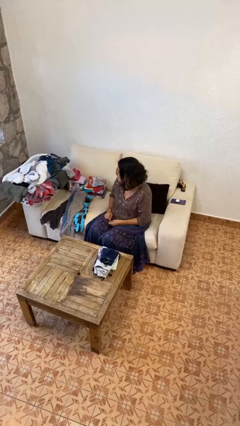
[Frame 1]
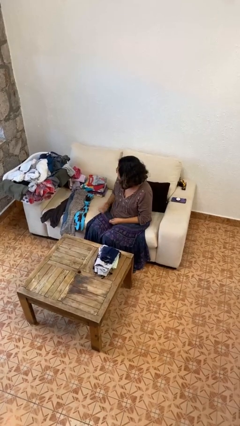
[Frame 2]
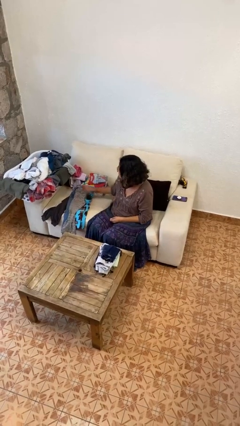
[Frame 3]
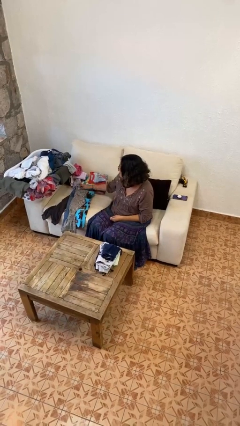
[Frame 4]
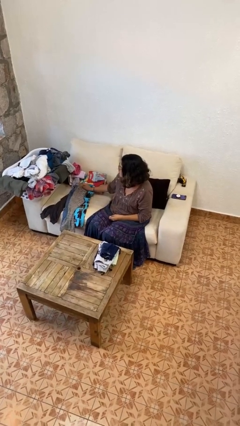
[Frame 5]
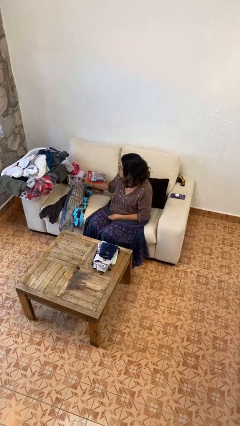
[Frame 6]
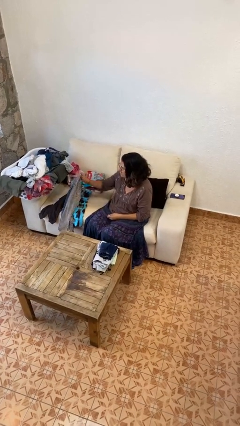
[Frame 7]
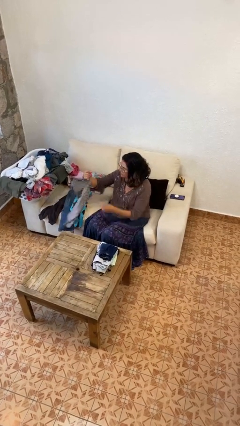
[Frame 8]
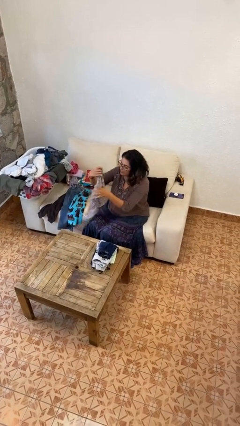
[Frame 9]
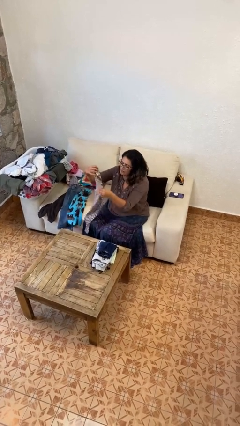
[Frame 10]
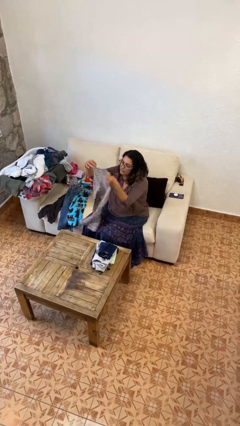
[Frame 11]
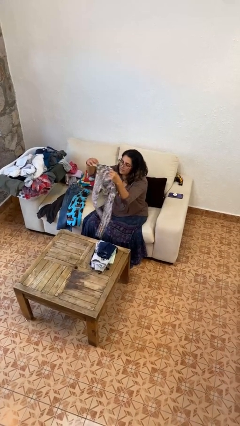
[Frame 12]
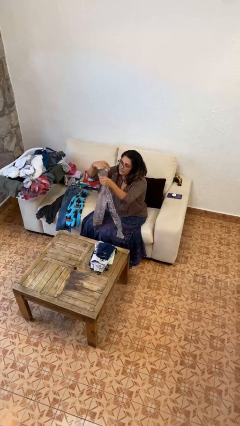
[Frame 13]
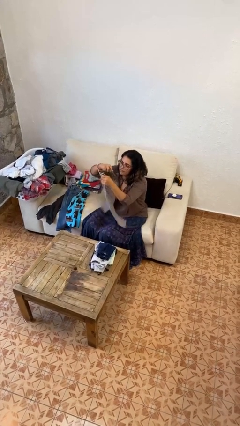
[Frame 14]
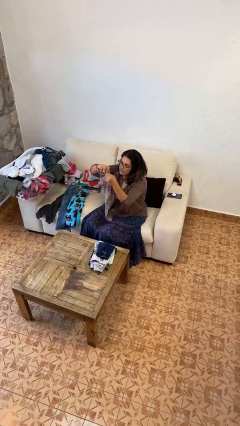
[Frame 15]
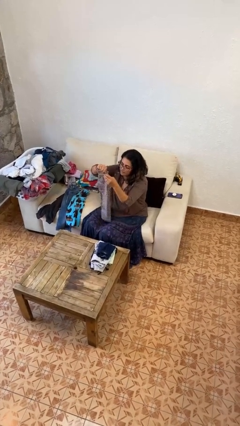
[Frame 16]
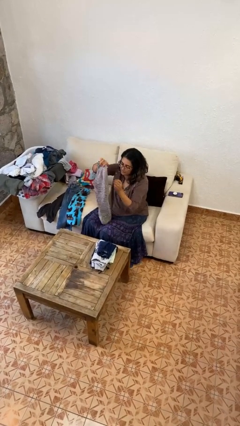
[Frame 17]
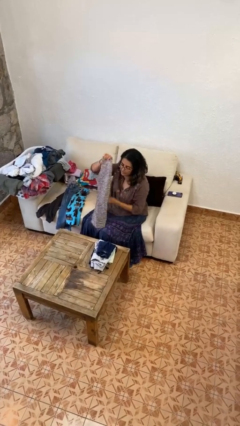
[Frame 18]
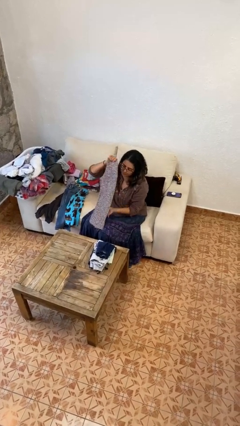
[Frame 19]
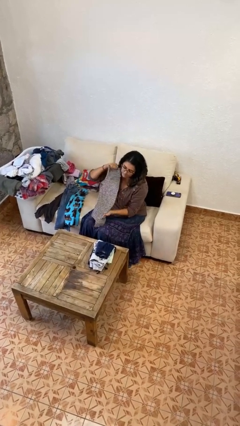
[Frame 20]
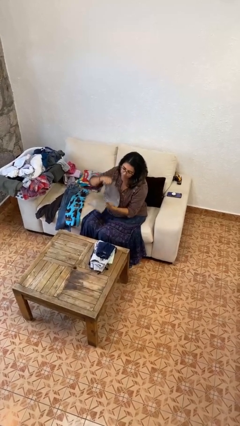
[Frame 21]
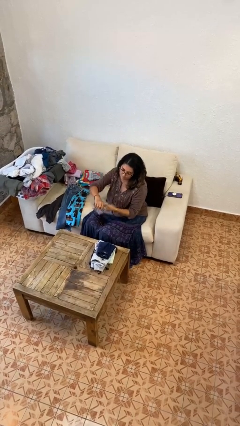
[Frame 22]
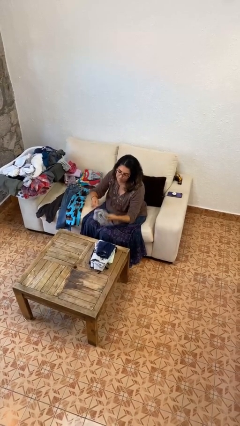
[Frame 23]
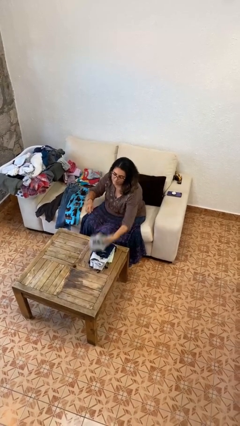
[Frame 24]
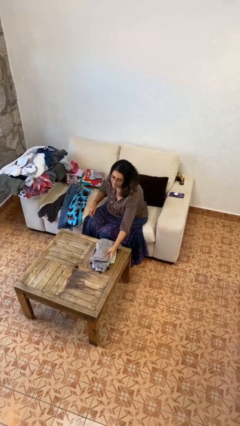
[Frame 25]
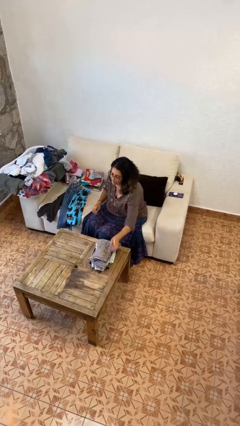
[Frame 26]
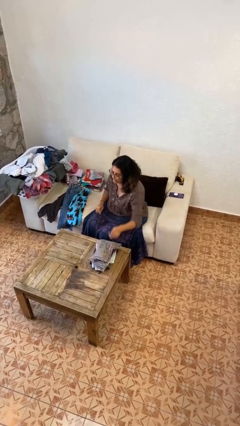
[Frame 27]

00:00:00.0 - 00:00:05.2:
person folds pants

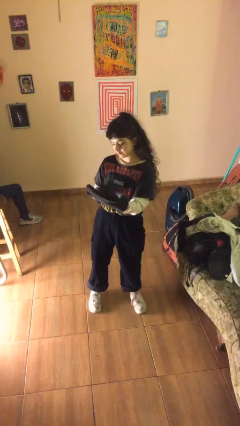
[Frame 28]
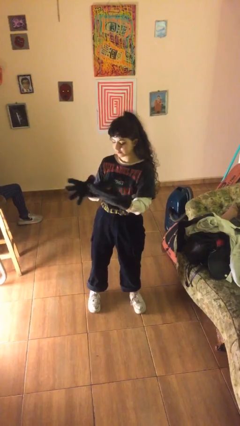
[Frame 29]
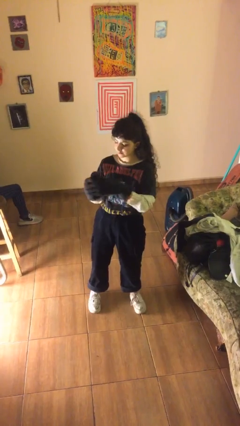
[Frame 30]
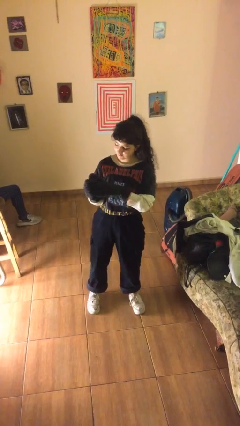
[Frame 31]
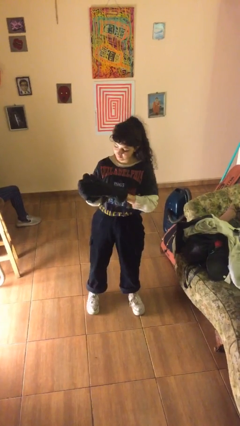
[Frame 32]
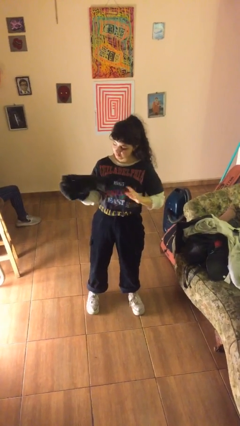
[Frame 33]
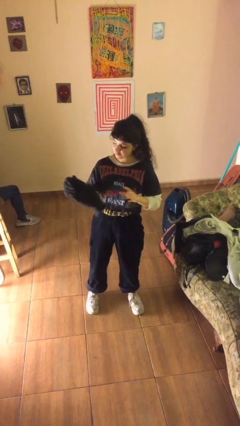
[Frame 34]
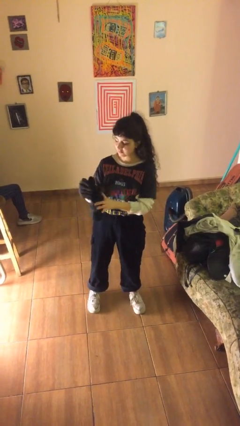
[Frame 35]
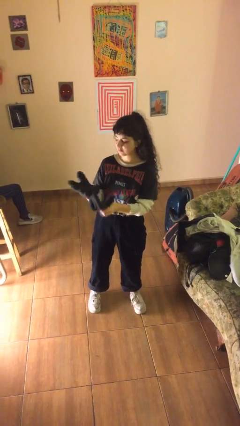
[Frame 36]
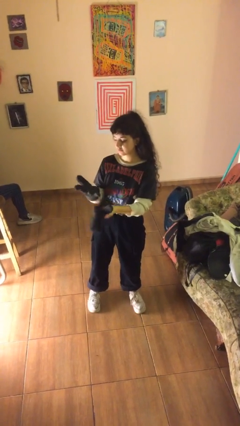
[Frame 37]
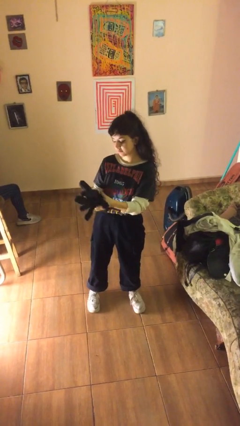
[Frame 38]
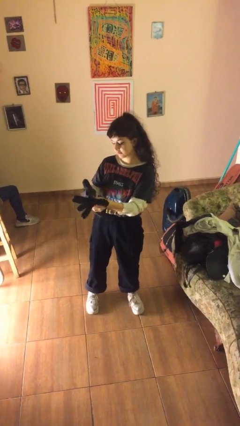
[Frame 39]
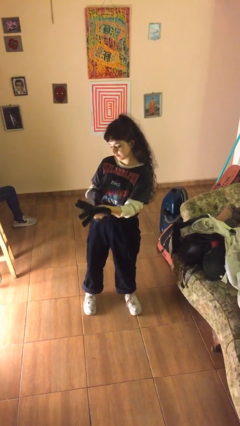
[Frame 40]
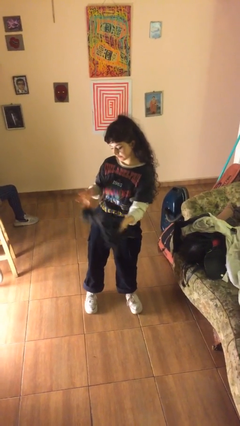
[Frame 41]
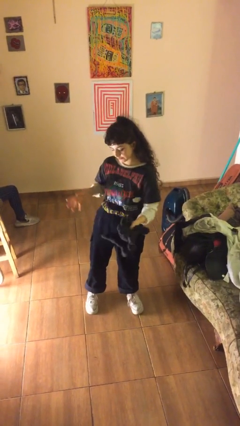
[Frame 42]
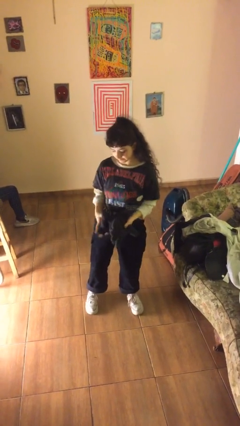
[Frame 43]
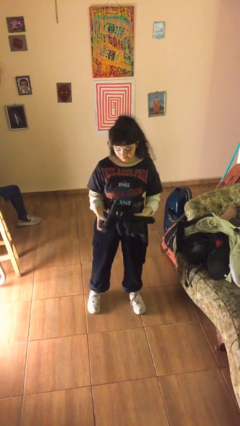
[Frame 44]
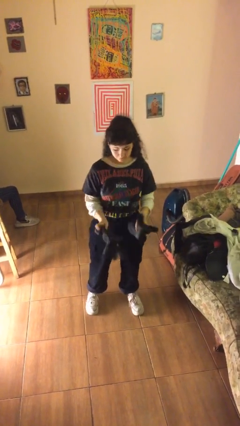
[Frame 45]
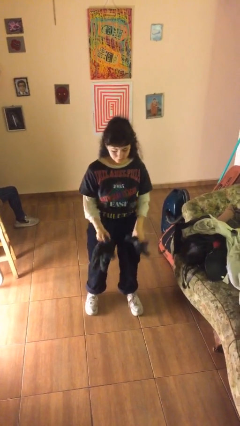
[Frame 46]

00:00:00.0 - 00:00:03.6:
person takes off gloves

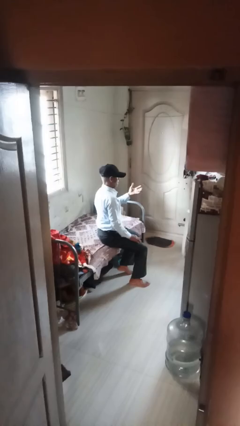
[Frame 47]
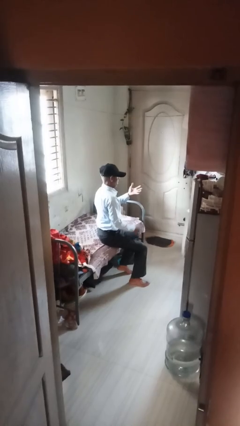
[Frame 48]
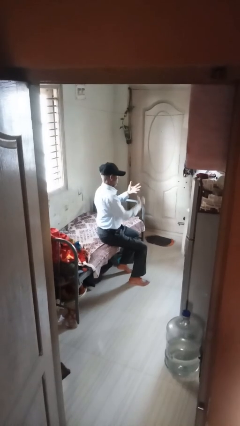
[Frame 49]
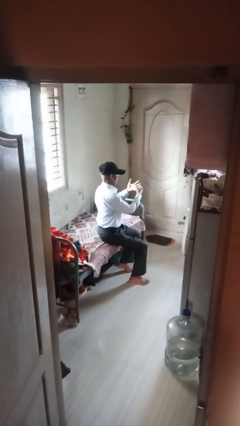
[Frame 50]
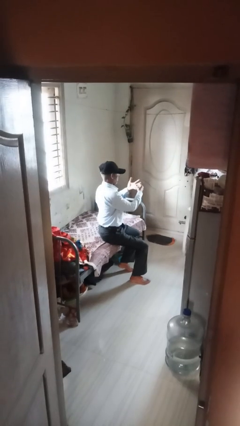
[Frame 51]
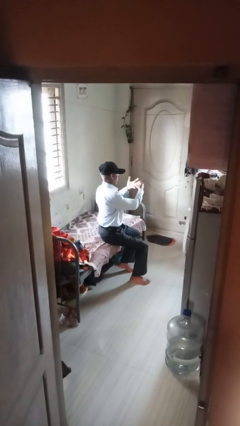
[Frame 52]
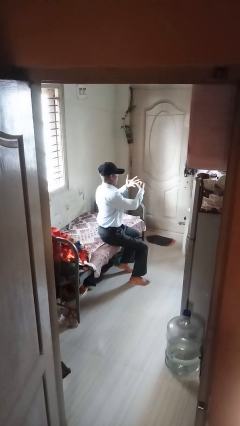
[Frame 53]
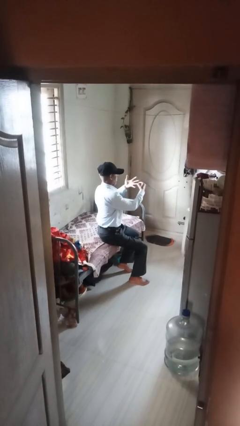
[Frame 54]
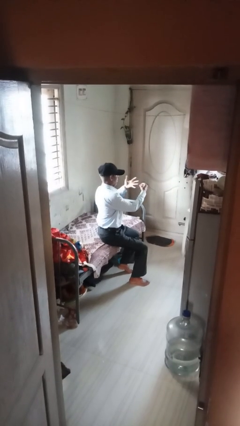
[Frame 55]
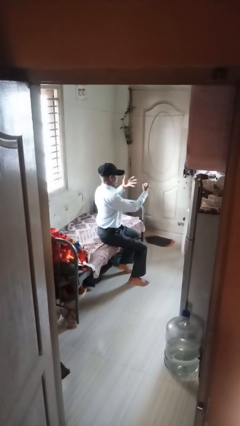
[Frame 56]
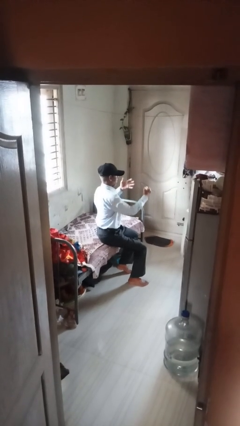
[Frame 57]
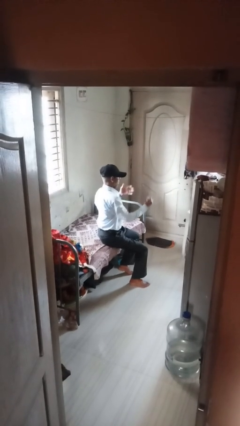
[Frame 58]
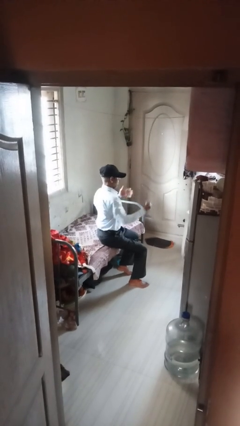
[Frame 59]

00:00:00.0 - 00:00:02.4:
person takes off ring

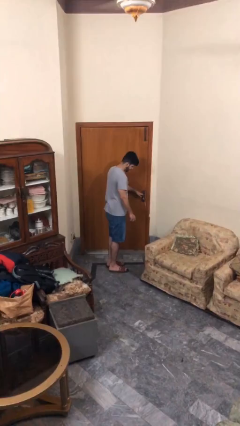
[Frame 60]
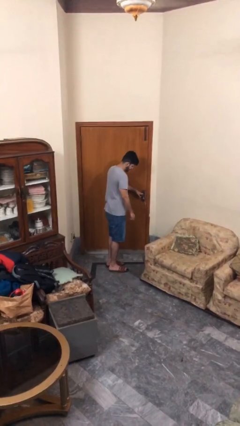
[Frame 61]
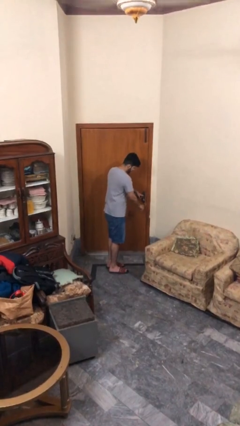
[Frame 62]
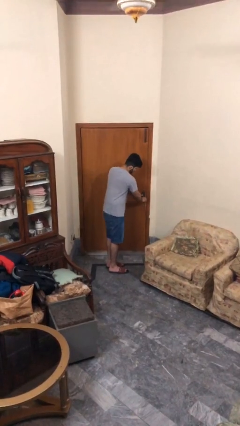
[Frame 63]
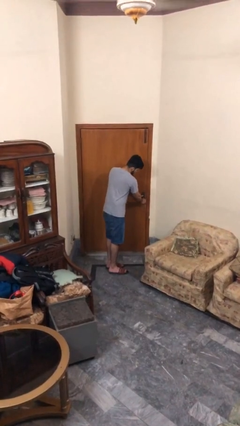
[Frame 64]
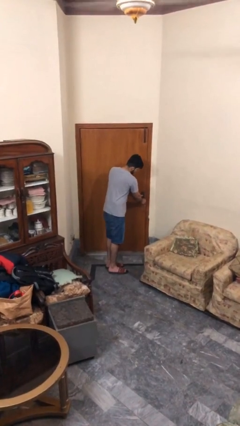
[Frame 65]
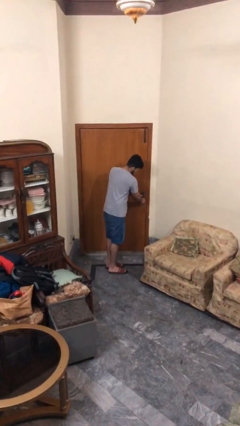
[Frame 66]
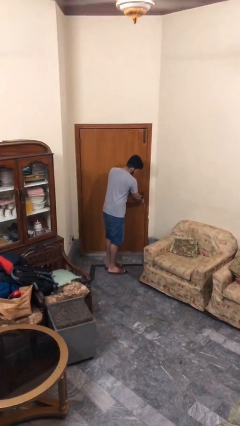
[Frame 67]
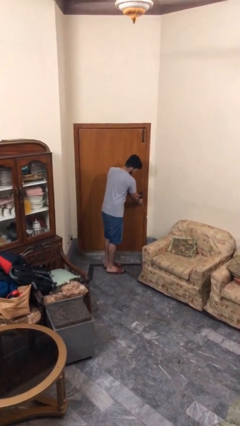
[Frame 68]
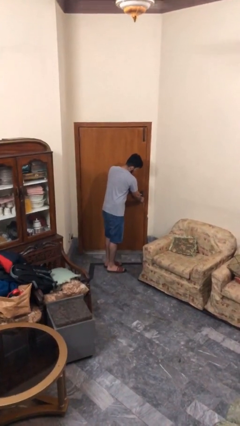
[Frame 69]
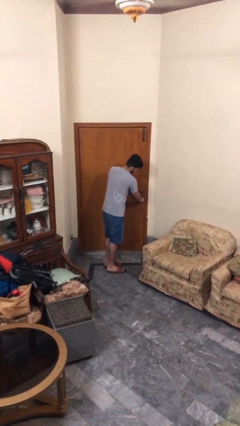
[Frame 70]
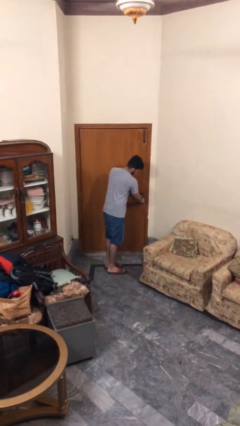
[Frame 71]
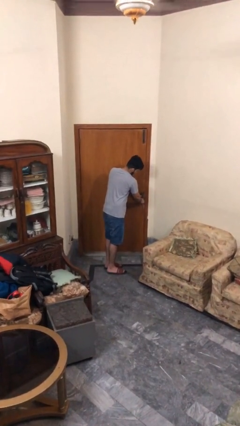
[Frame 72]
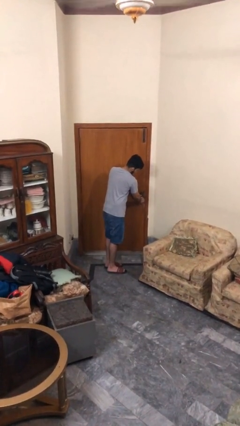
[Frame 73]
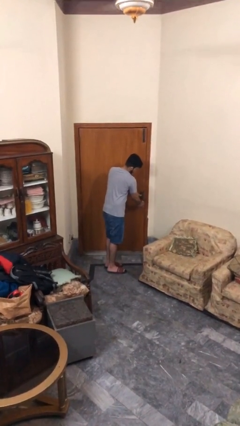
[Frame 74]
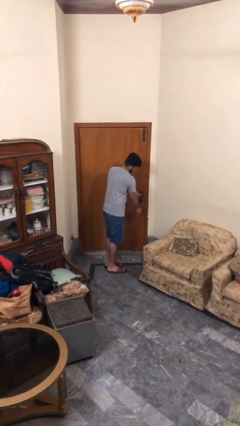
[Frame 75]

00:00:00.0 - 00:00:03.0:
person locks door with keys

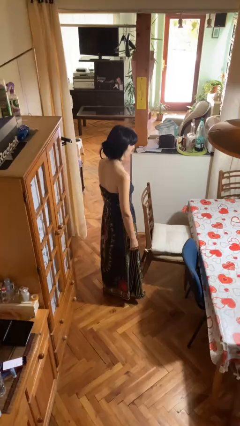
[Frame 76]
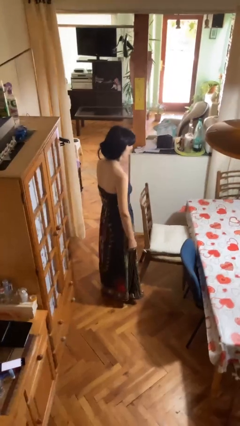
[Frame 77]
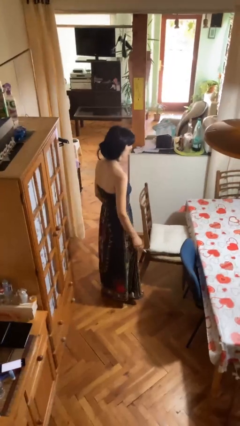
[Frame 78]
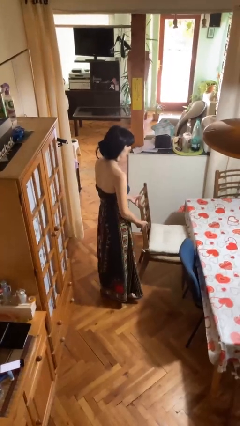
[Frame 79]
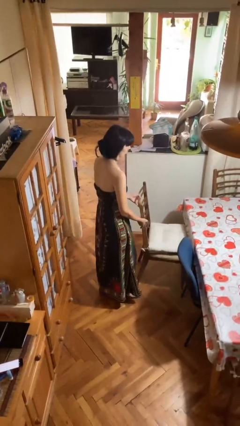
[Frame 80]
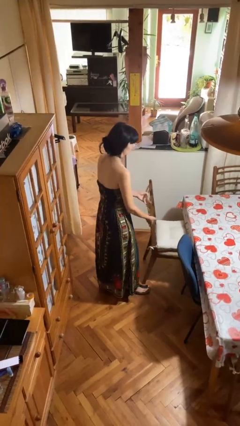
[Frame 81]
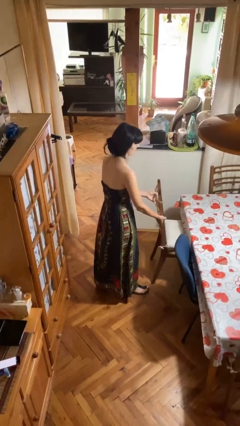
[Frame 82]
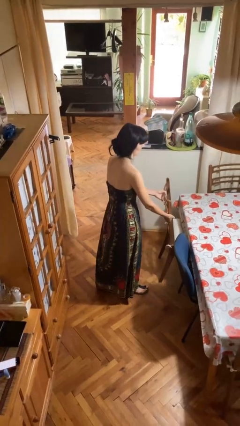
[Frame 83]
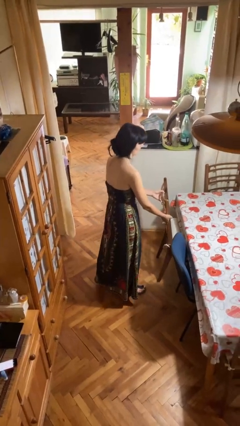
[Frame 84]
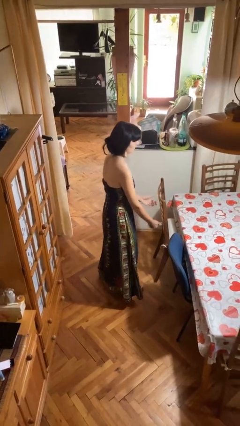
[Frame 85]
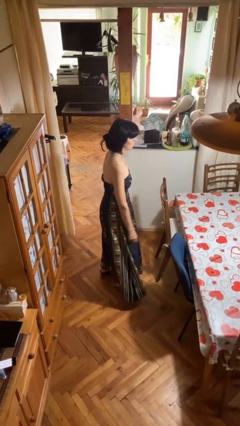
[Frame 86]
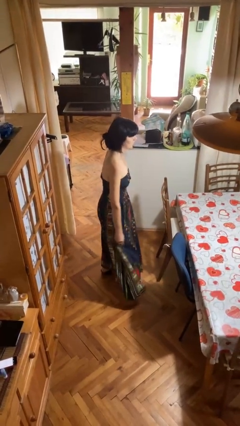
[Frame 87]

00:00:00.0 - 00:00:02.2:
person pushes in chair

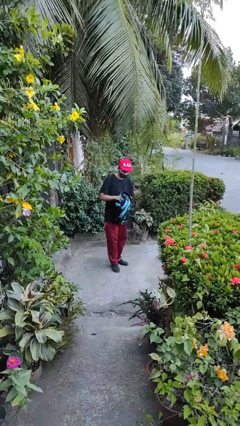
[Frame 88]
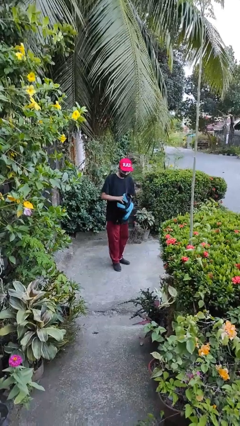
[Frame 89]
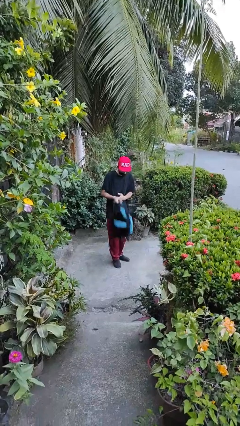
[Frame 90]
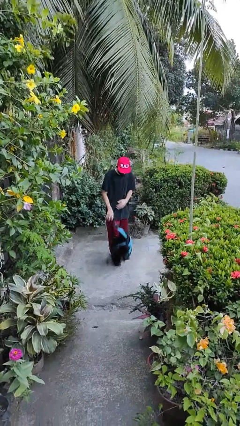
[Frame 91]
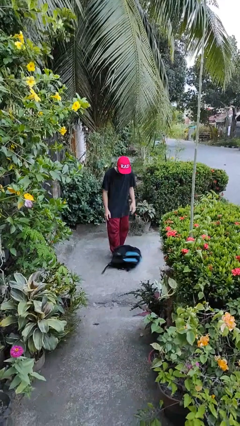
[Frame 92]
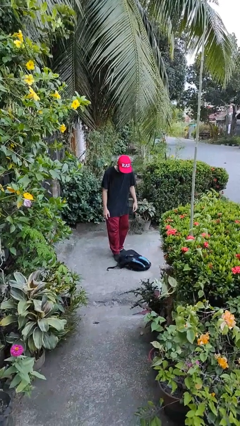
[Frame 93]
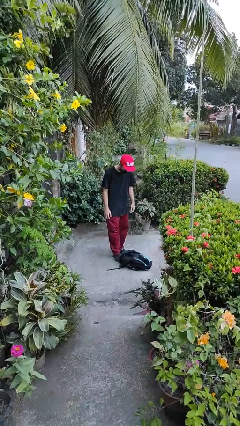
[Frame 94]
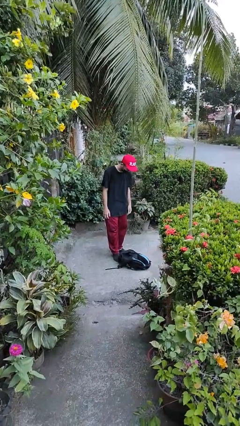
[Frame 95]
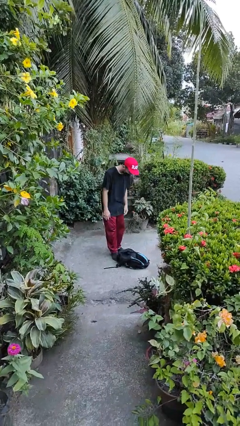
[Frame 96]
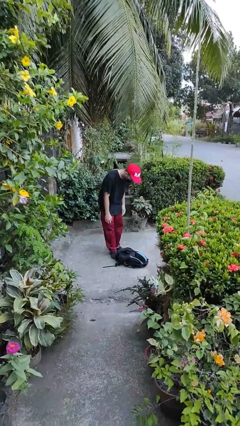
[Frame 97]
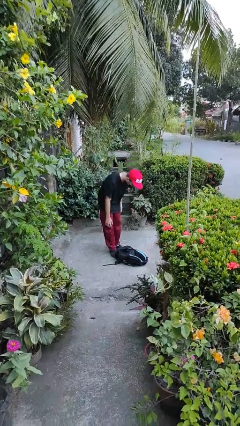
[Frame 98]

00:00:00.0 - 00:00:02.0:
person drops object
